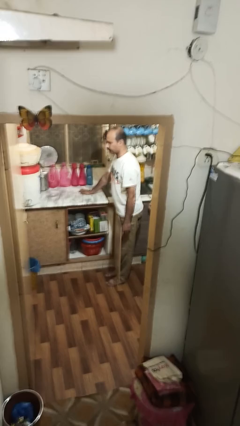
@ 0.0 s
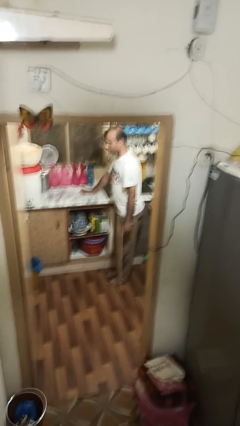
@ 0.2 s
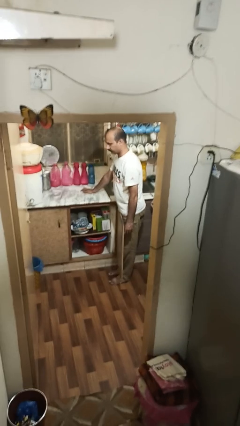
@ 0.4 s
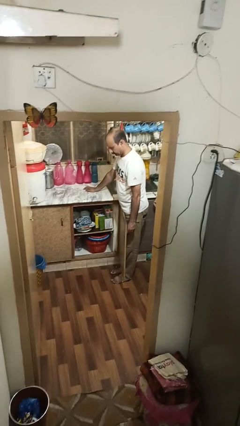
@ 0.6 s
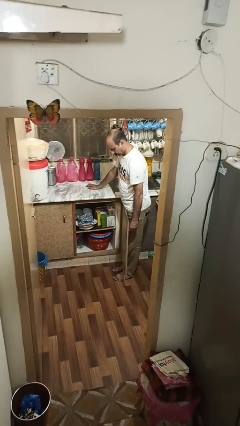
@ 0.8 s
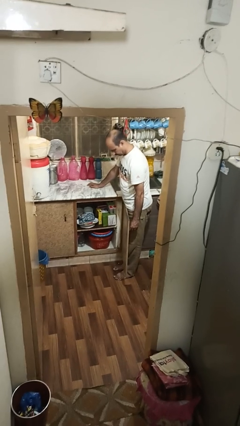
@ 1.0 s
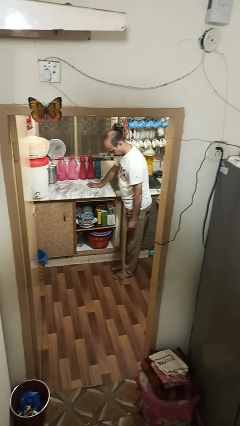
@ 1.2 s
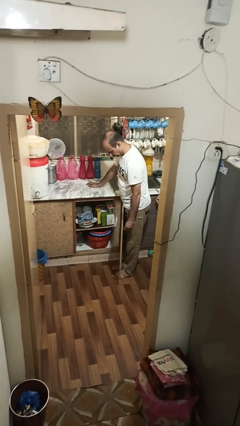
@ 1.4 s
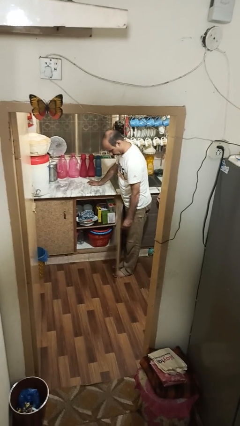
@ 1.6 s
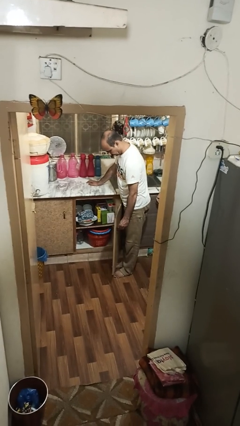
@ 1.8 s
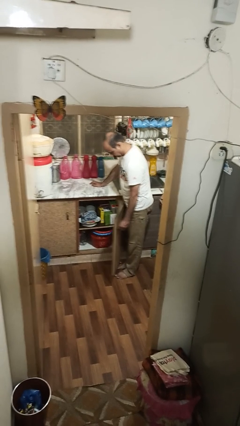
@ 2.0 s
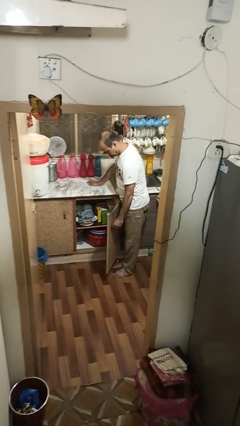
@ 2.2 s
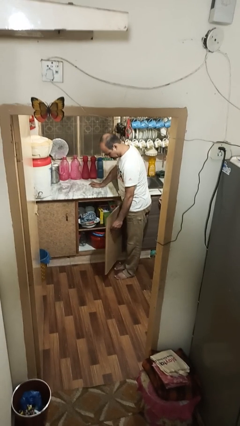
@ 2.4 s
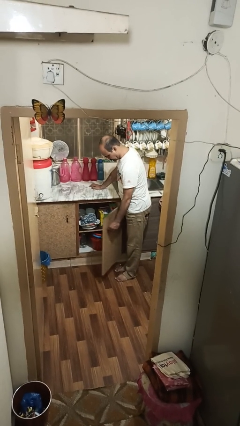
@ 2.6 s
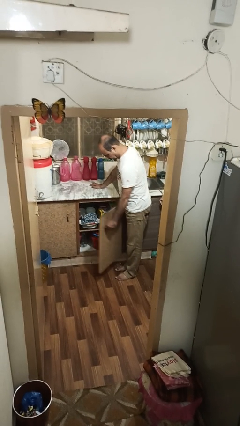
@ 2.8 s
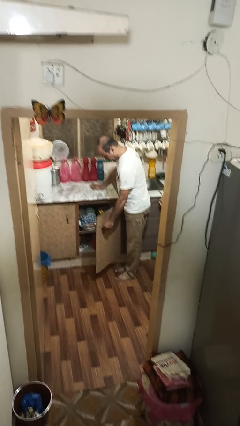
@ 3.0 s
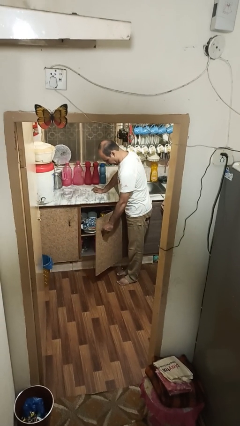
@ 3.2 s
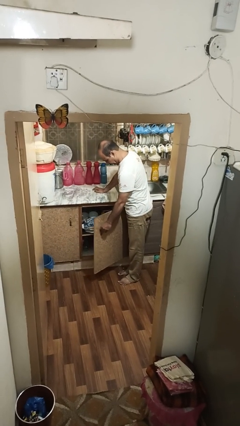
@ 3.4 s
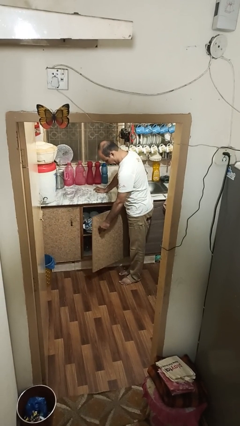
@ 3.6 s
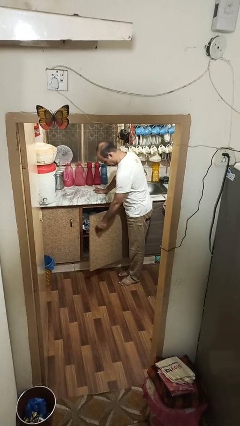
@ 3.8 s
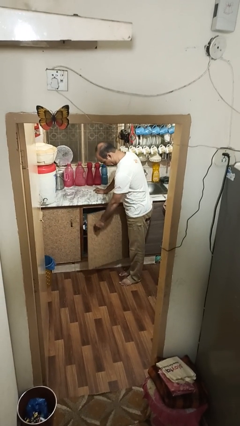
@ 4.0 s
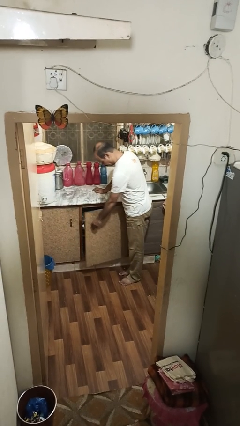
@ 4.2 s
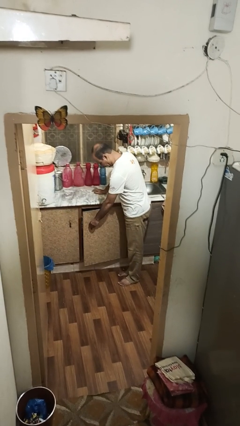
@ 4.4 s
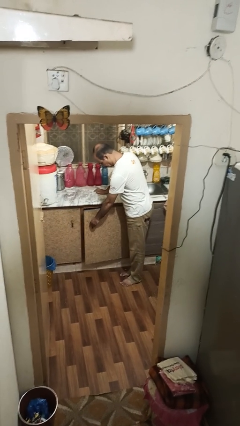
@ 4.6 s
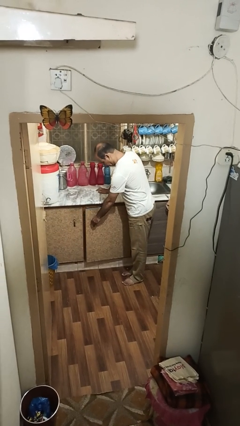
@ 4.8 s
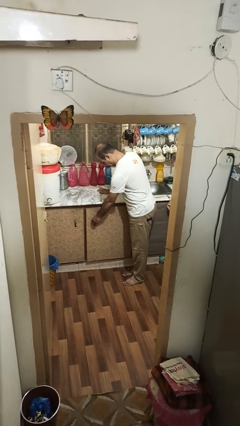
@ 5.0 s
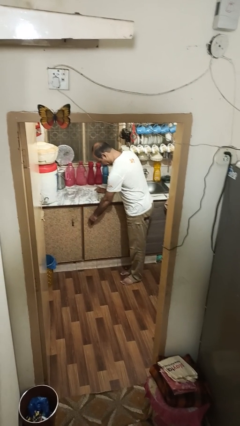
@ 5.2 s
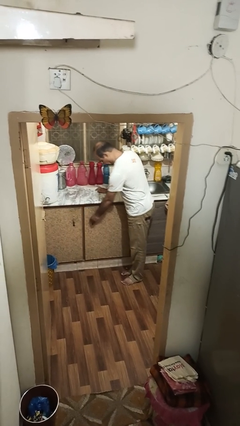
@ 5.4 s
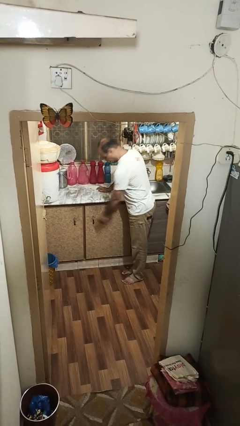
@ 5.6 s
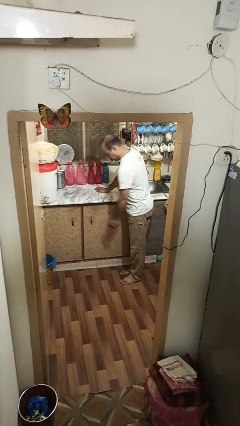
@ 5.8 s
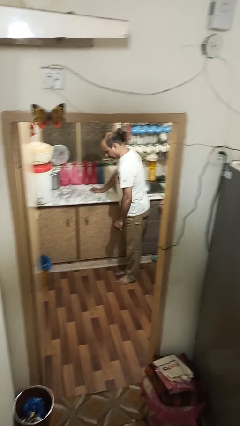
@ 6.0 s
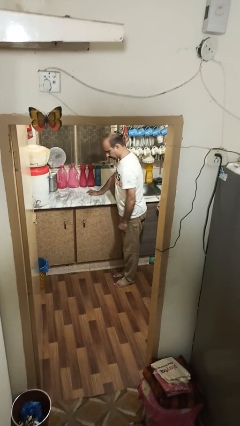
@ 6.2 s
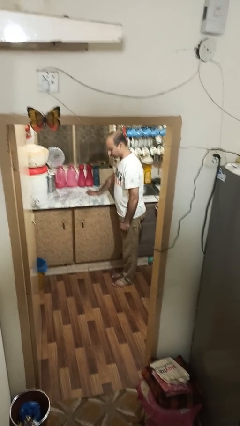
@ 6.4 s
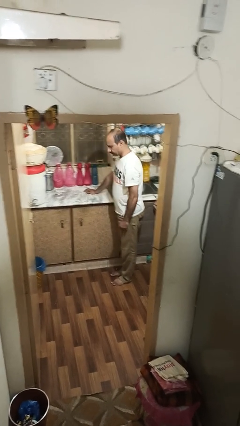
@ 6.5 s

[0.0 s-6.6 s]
person closes cabinet

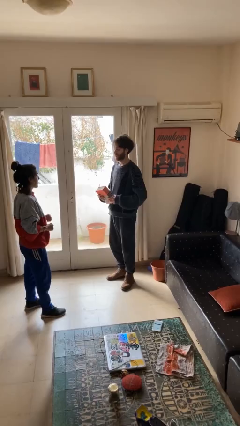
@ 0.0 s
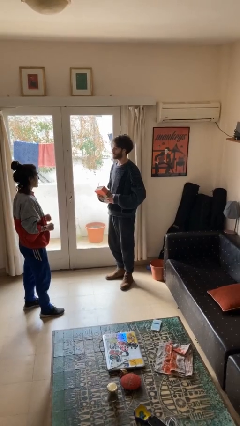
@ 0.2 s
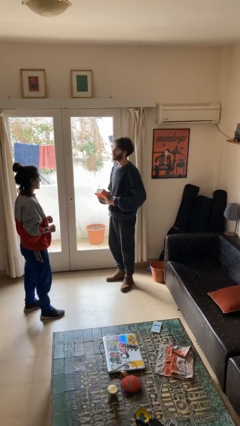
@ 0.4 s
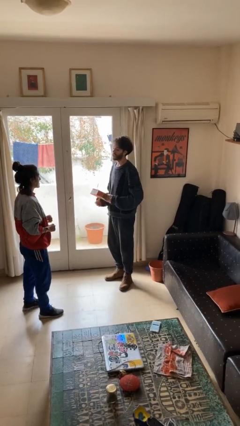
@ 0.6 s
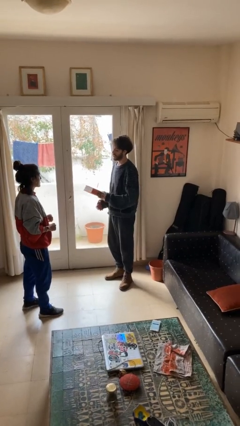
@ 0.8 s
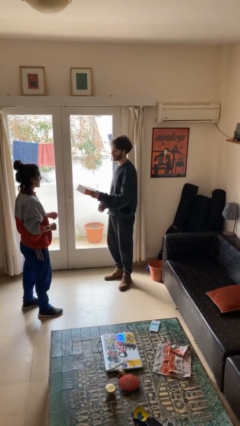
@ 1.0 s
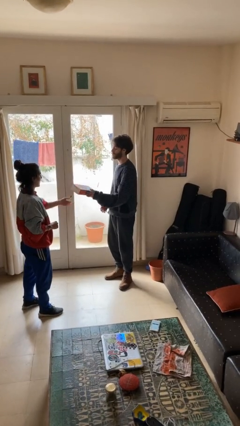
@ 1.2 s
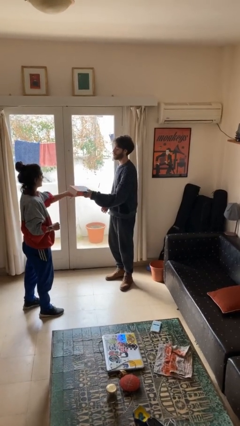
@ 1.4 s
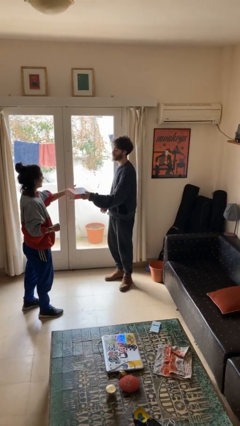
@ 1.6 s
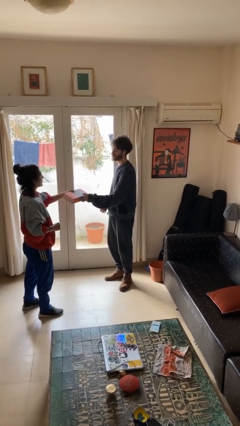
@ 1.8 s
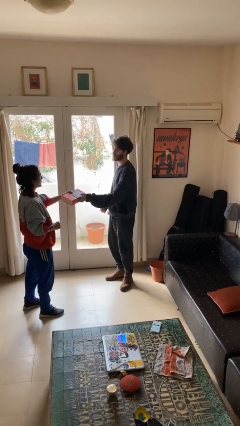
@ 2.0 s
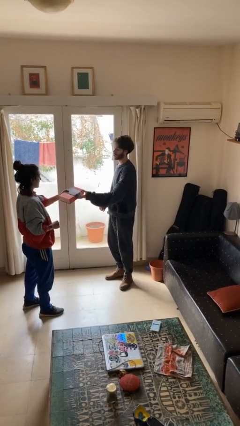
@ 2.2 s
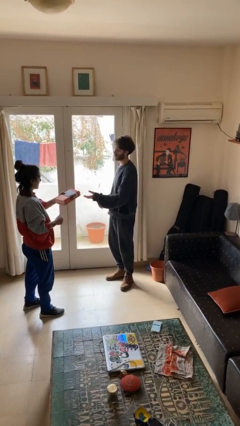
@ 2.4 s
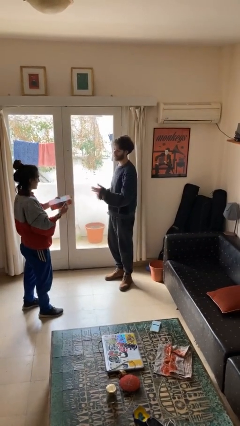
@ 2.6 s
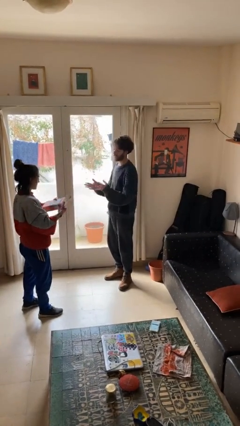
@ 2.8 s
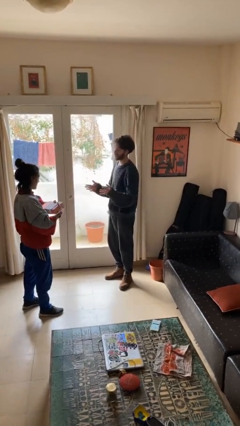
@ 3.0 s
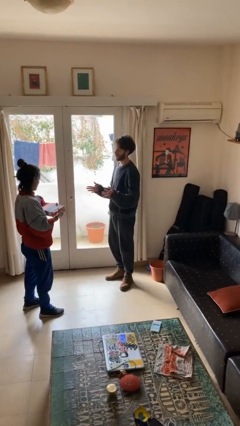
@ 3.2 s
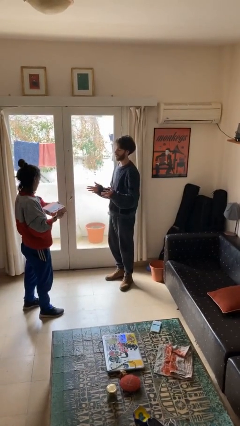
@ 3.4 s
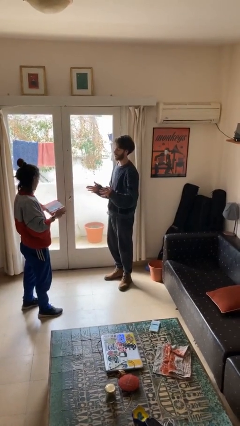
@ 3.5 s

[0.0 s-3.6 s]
person transfers object to person

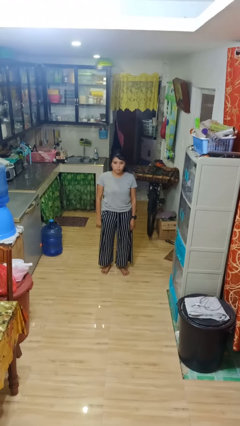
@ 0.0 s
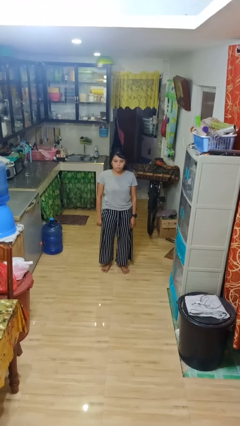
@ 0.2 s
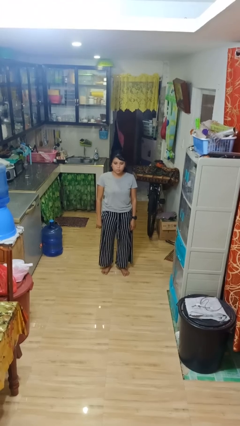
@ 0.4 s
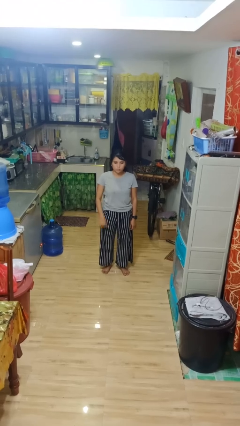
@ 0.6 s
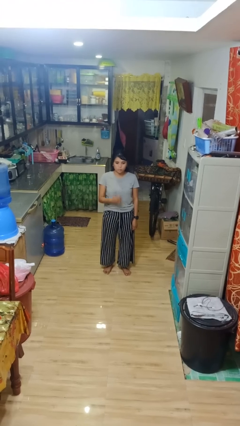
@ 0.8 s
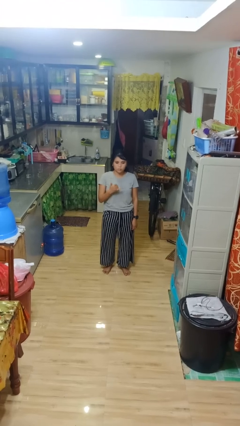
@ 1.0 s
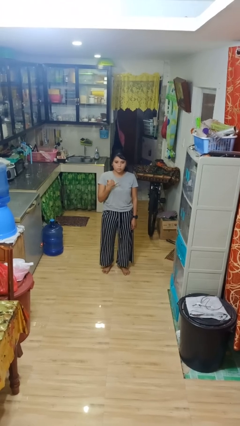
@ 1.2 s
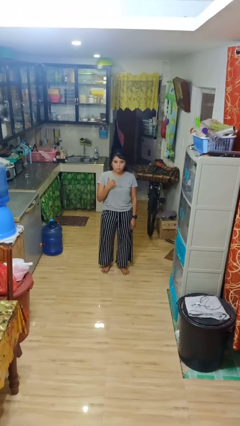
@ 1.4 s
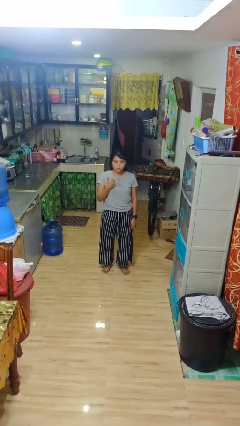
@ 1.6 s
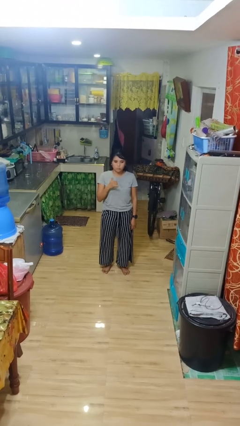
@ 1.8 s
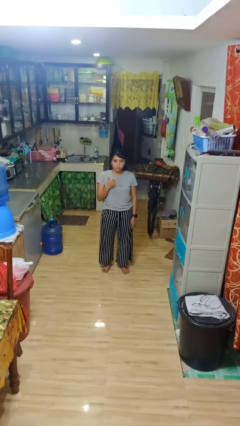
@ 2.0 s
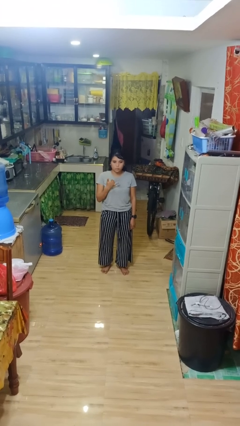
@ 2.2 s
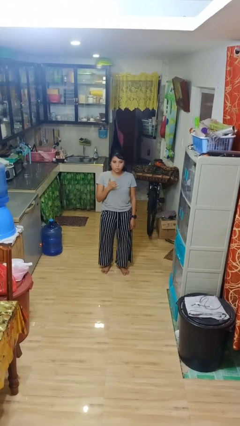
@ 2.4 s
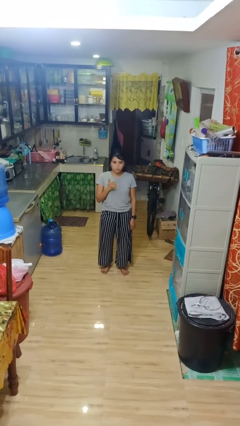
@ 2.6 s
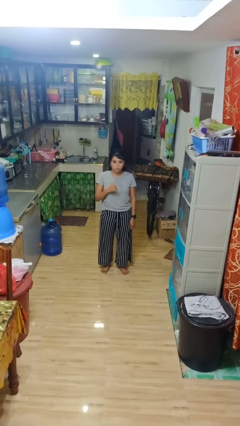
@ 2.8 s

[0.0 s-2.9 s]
person gestures hang loose

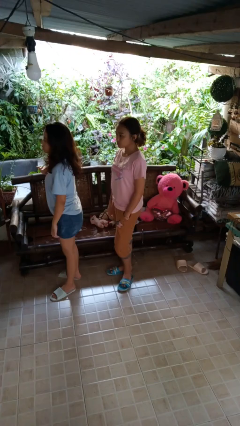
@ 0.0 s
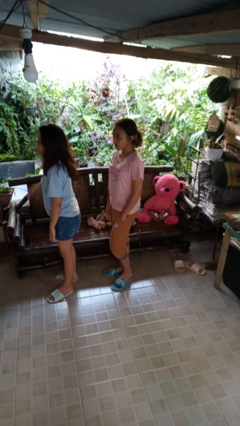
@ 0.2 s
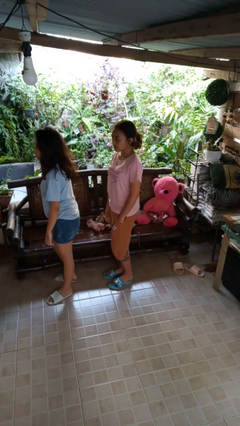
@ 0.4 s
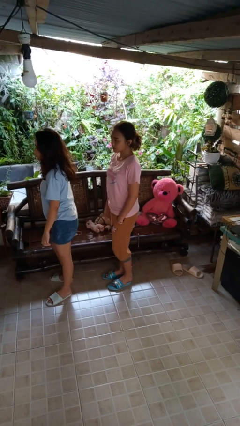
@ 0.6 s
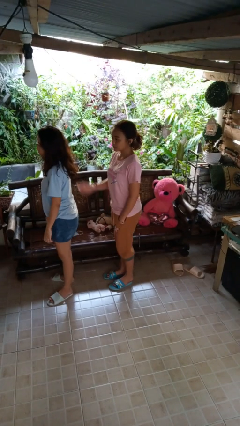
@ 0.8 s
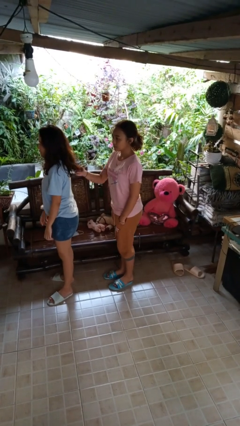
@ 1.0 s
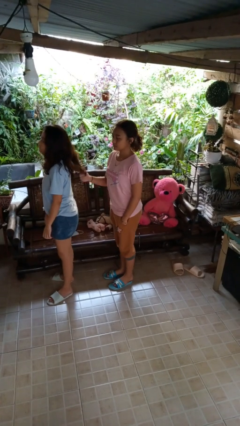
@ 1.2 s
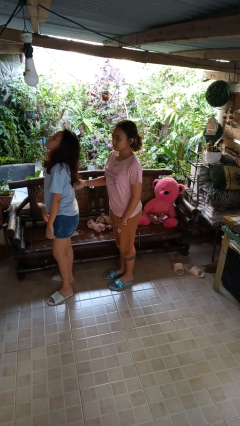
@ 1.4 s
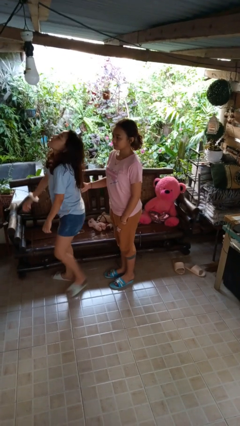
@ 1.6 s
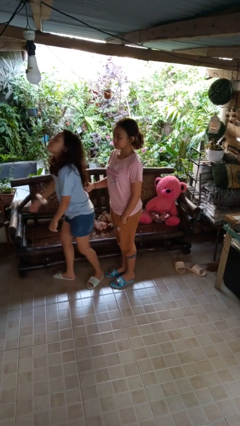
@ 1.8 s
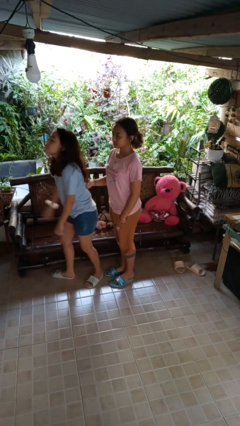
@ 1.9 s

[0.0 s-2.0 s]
person grabs person by hair

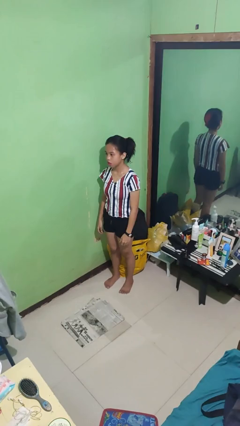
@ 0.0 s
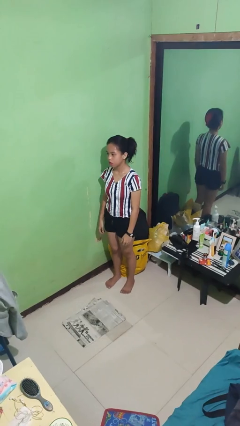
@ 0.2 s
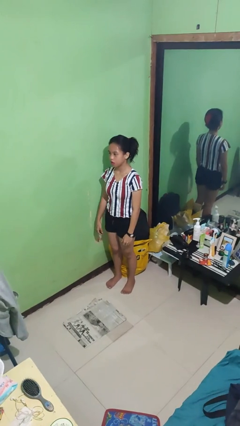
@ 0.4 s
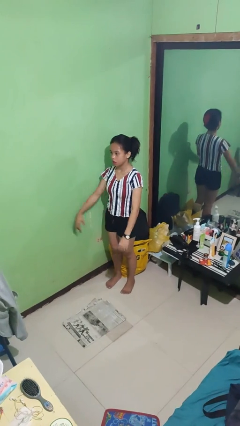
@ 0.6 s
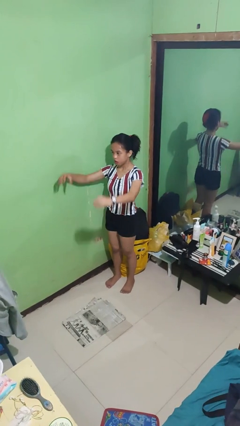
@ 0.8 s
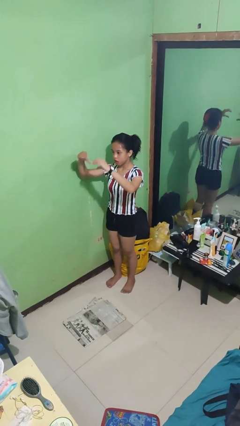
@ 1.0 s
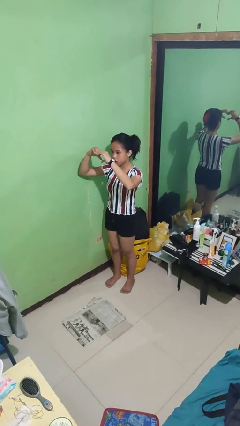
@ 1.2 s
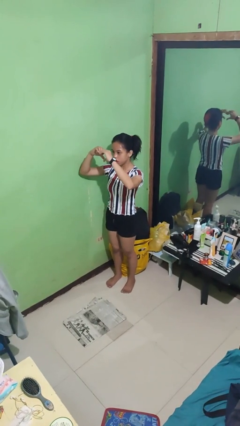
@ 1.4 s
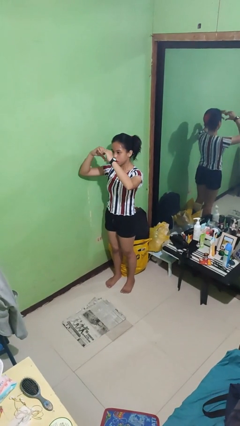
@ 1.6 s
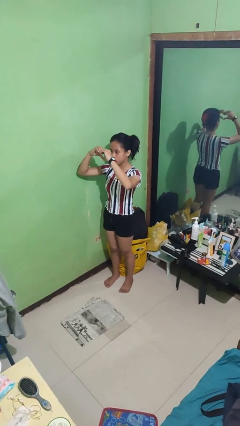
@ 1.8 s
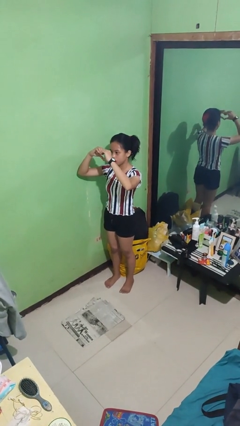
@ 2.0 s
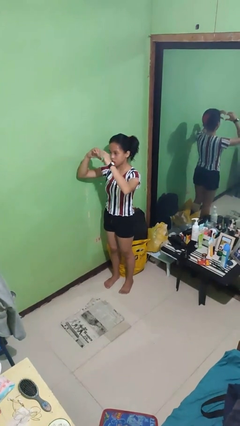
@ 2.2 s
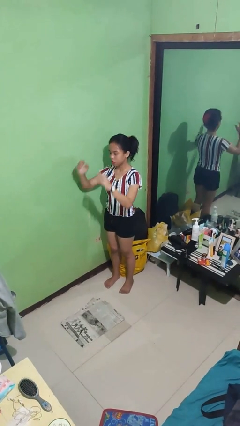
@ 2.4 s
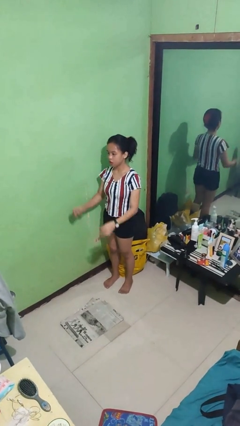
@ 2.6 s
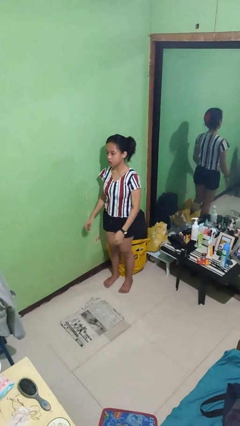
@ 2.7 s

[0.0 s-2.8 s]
person gestures heart
